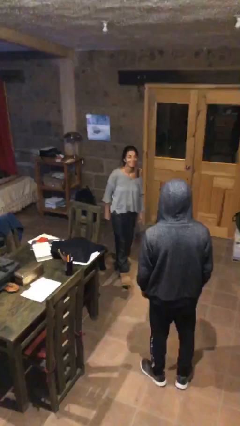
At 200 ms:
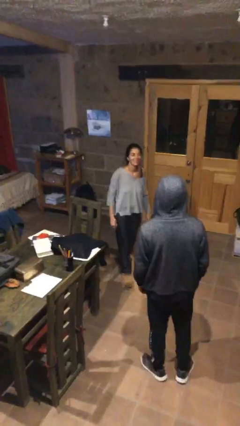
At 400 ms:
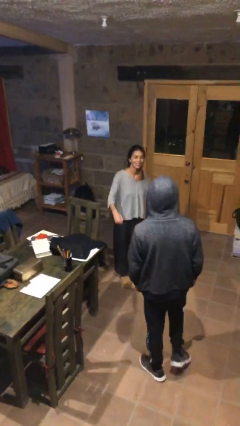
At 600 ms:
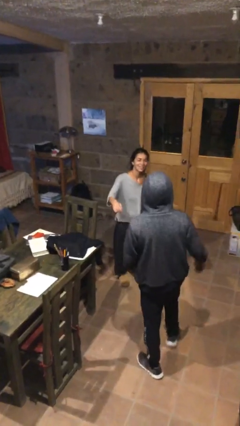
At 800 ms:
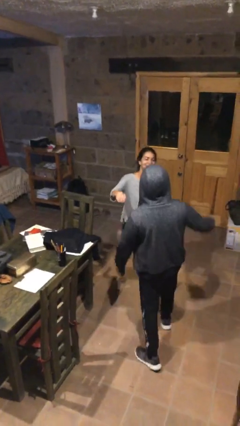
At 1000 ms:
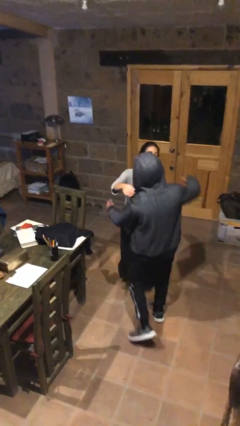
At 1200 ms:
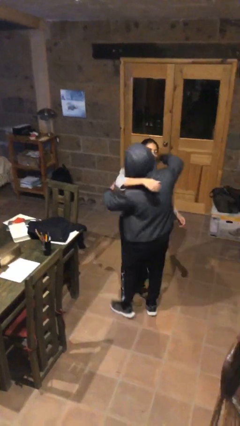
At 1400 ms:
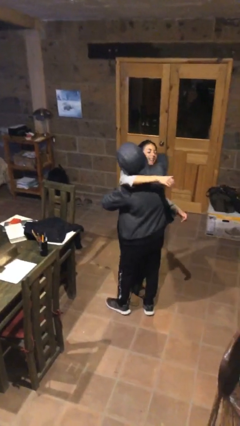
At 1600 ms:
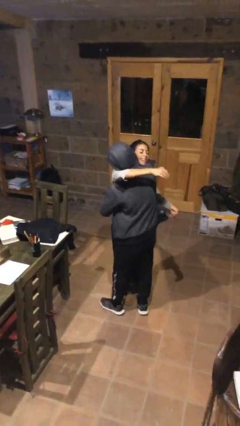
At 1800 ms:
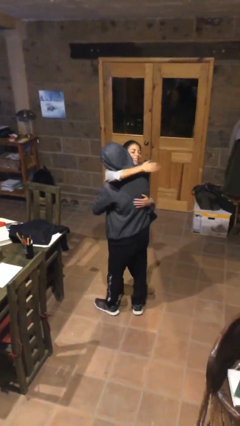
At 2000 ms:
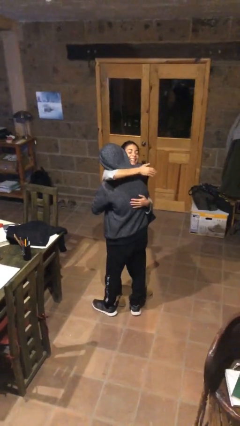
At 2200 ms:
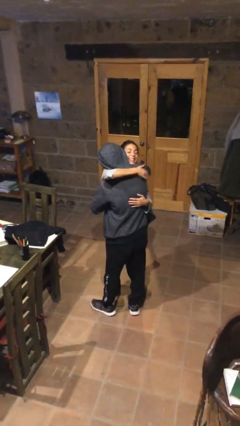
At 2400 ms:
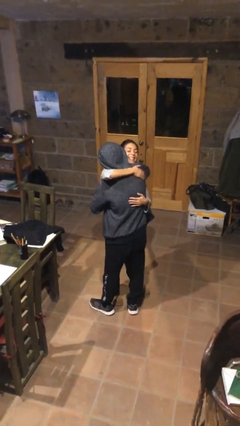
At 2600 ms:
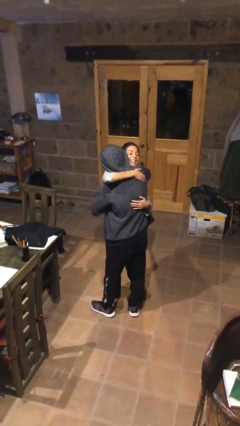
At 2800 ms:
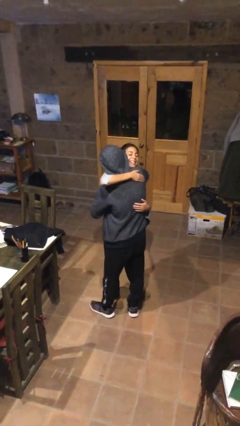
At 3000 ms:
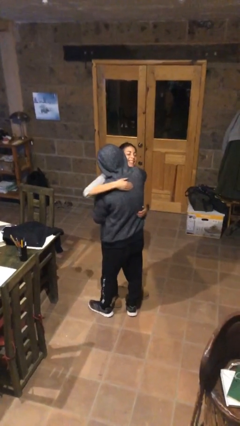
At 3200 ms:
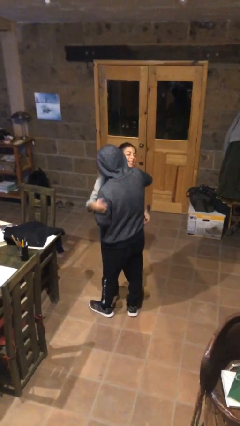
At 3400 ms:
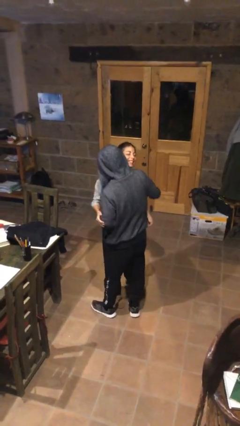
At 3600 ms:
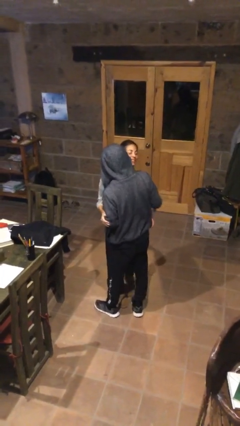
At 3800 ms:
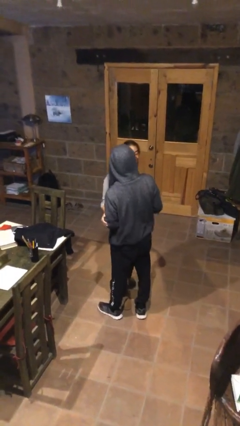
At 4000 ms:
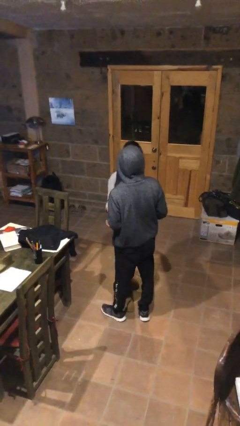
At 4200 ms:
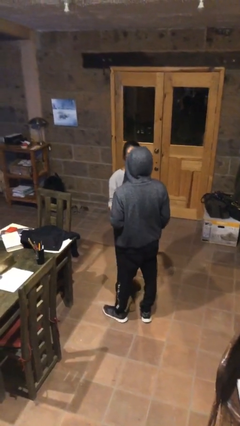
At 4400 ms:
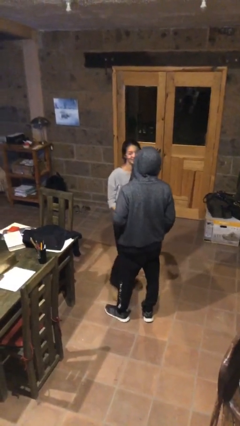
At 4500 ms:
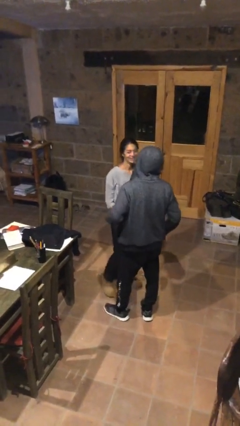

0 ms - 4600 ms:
person embraces person

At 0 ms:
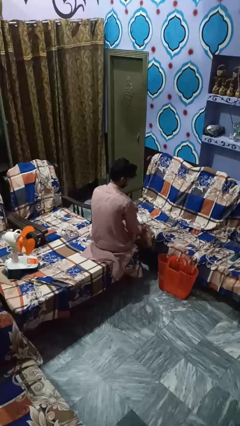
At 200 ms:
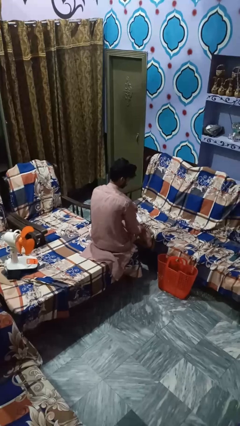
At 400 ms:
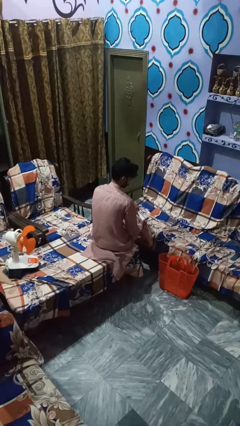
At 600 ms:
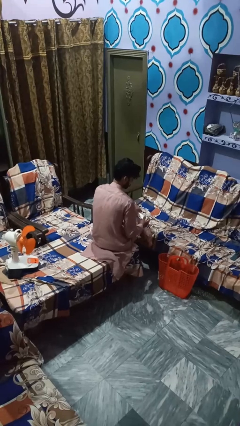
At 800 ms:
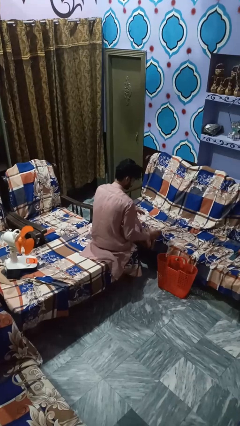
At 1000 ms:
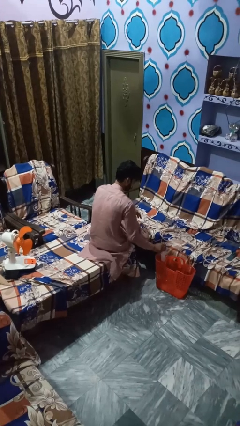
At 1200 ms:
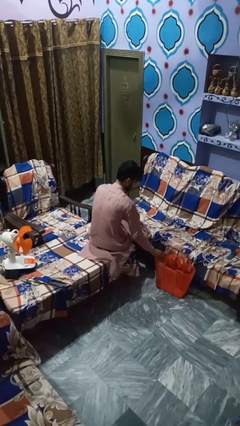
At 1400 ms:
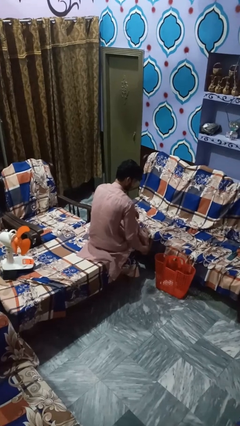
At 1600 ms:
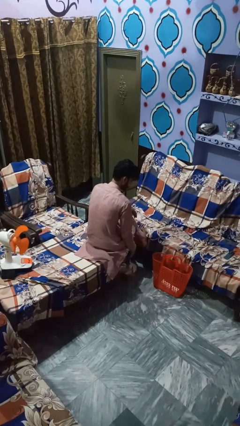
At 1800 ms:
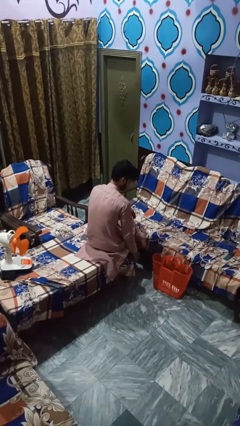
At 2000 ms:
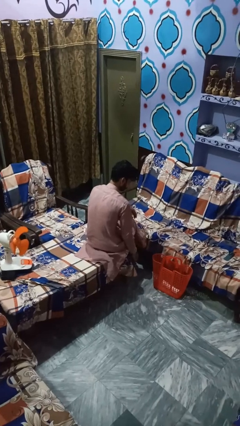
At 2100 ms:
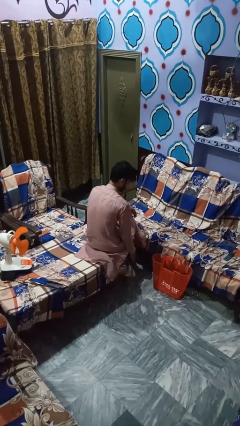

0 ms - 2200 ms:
person discards trash

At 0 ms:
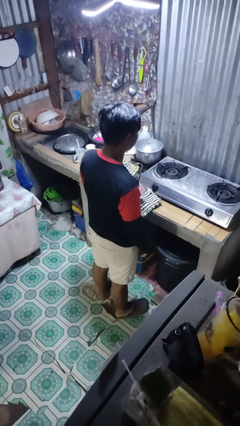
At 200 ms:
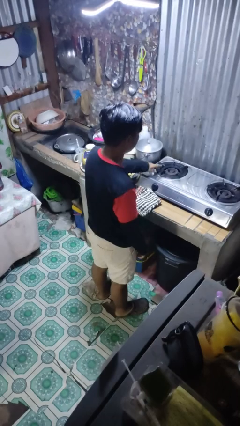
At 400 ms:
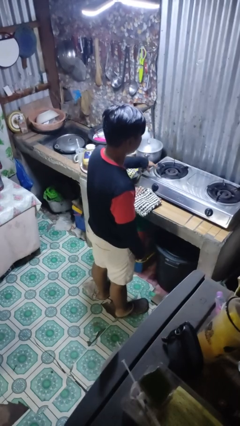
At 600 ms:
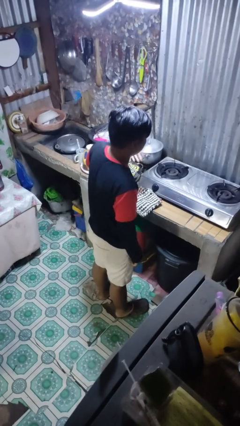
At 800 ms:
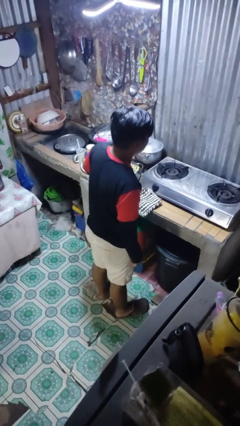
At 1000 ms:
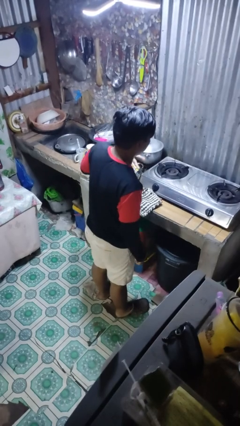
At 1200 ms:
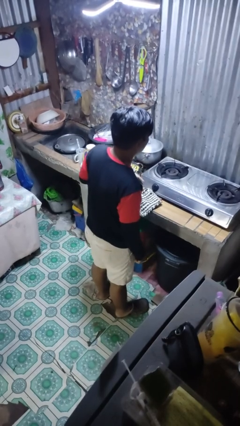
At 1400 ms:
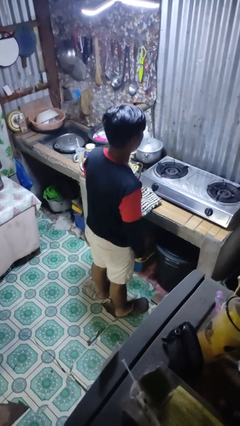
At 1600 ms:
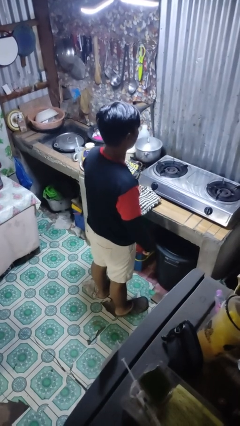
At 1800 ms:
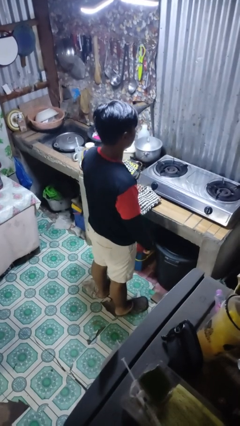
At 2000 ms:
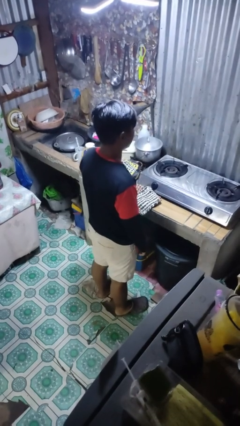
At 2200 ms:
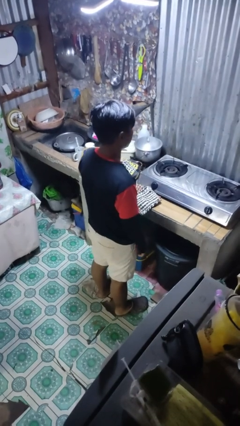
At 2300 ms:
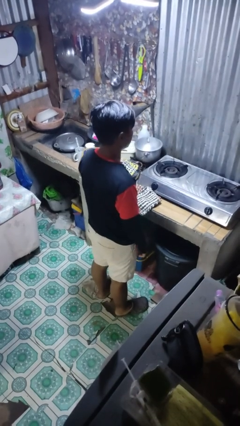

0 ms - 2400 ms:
person burns hand

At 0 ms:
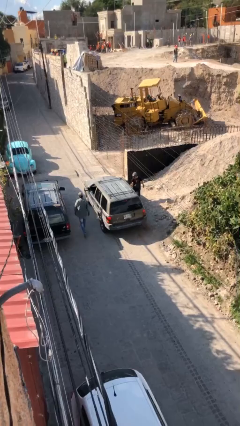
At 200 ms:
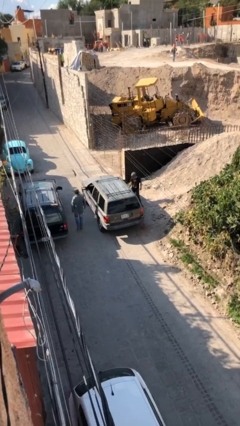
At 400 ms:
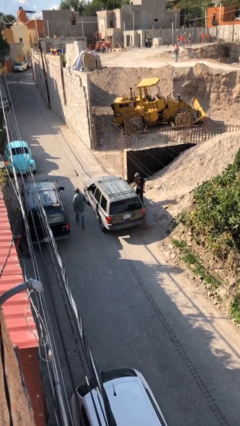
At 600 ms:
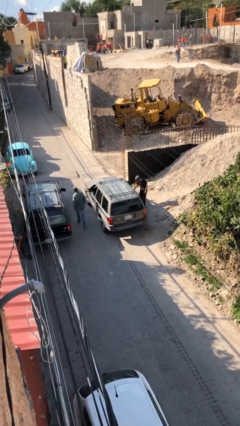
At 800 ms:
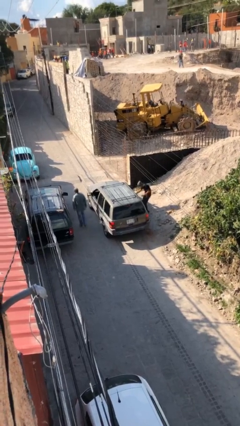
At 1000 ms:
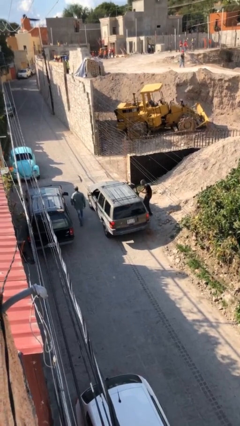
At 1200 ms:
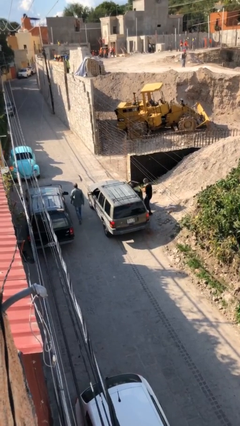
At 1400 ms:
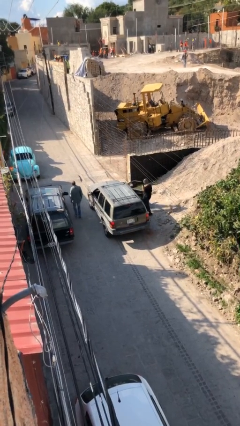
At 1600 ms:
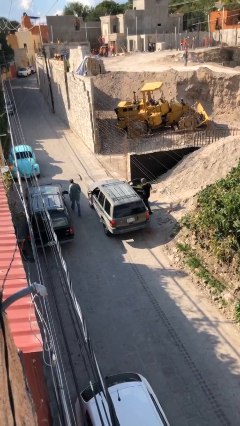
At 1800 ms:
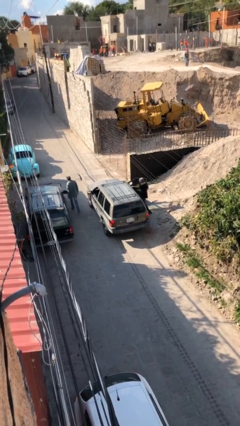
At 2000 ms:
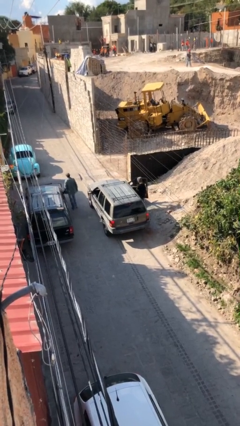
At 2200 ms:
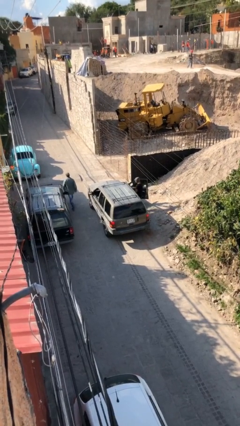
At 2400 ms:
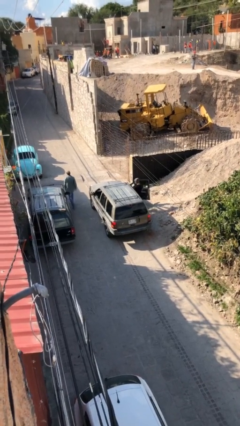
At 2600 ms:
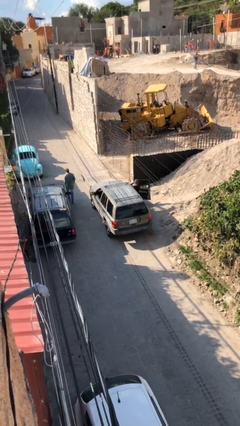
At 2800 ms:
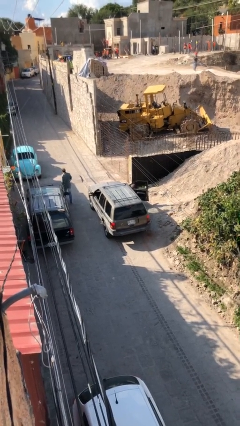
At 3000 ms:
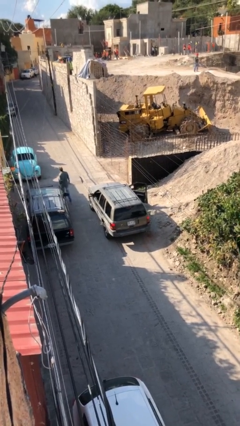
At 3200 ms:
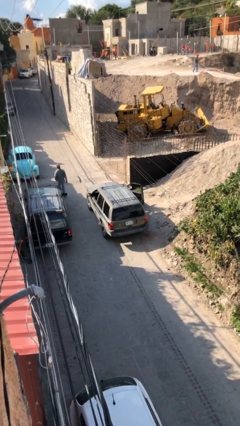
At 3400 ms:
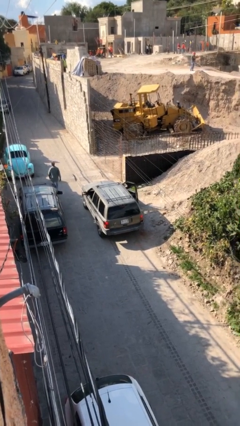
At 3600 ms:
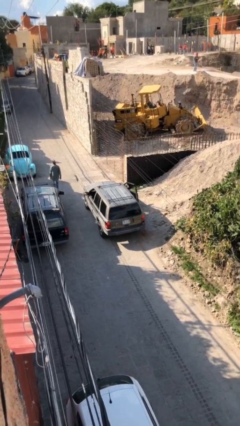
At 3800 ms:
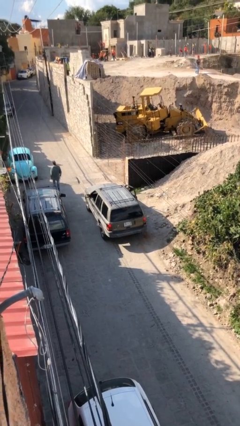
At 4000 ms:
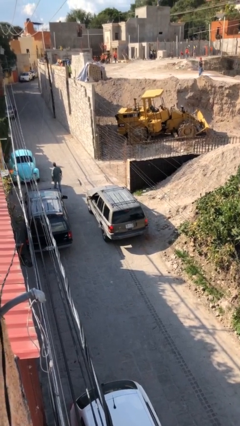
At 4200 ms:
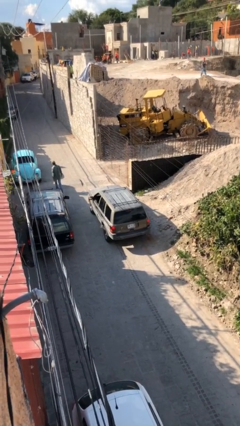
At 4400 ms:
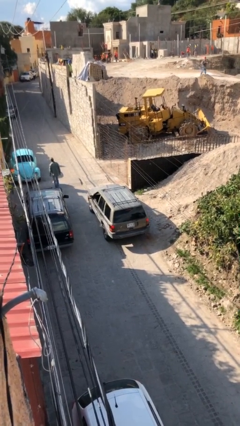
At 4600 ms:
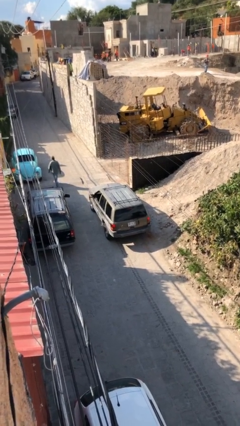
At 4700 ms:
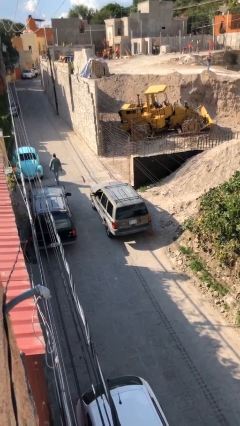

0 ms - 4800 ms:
car picks up person

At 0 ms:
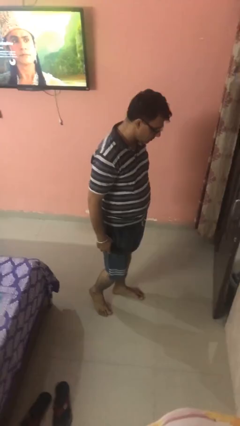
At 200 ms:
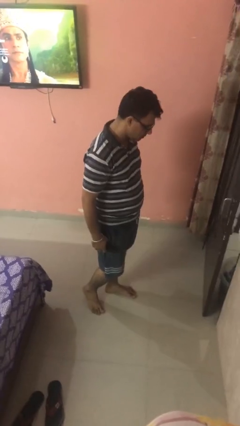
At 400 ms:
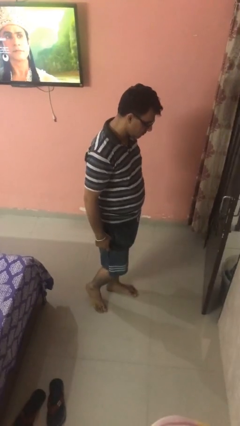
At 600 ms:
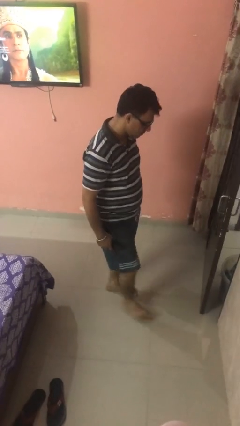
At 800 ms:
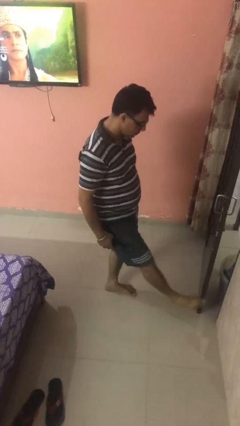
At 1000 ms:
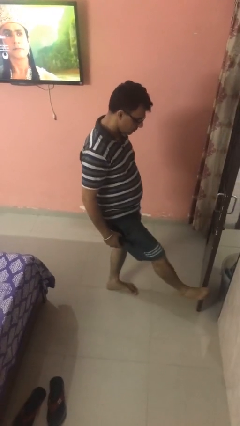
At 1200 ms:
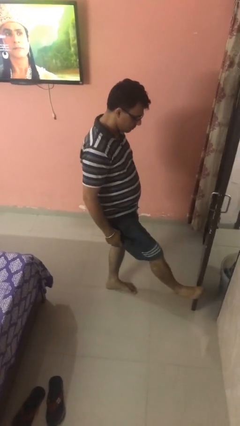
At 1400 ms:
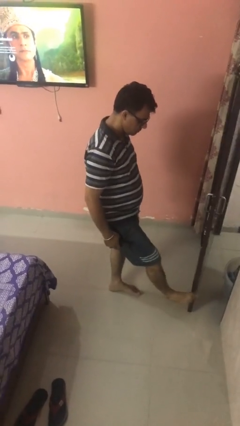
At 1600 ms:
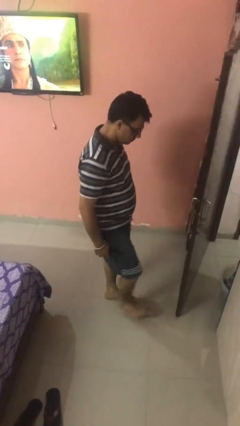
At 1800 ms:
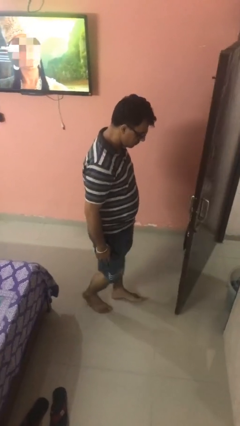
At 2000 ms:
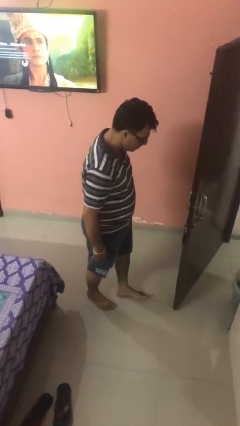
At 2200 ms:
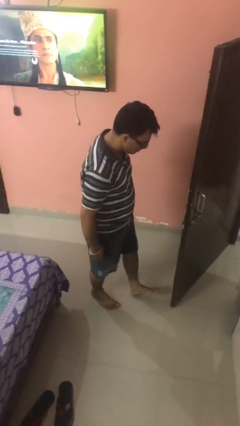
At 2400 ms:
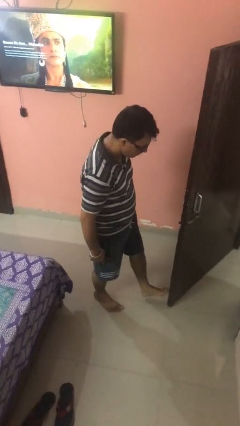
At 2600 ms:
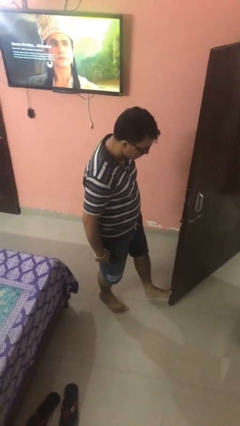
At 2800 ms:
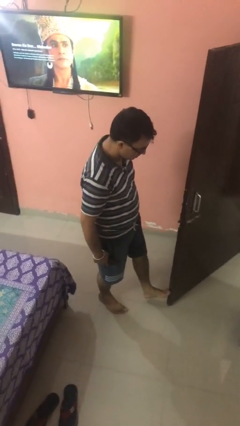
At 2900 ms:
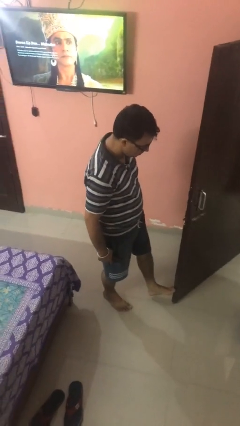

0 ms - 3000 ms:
person opens facility door

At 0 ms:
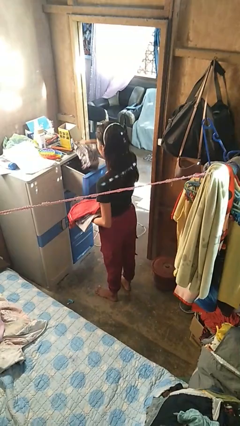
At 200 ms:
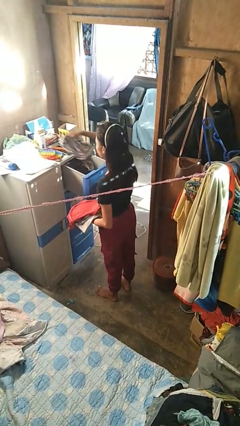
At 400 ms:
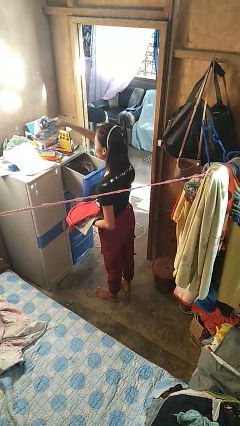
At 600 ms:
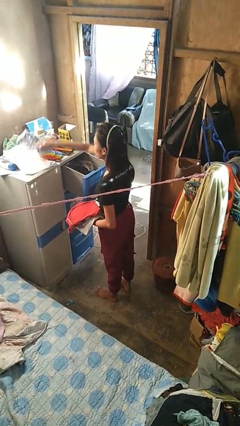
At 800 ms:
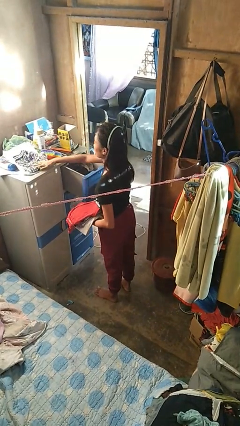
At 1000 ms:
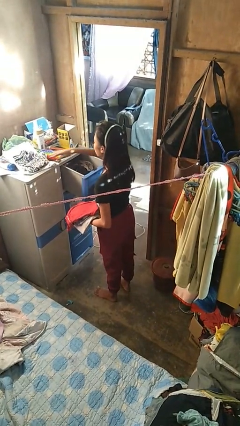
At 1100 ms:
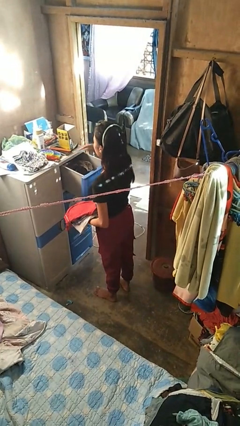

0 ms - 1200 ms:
person takes clothes from dresser
